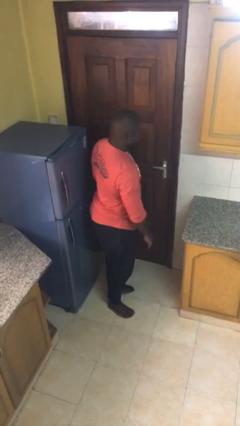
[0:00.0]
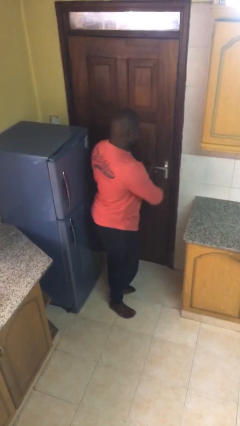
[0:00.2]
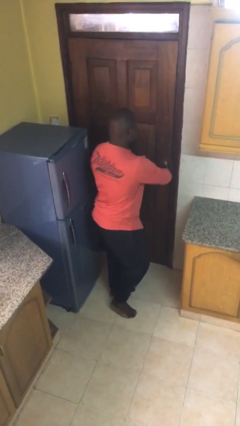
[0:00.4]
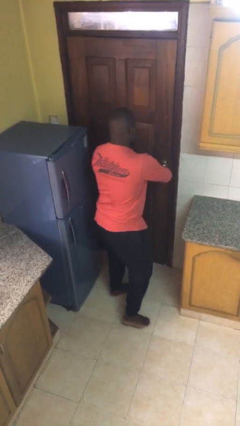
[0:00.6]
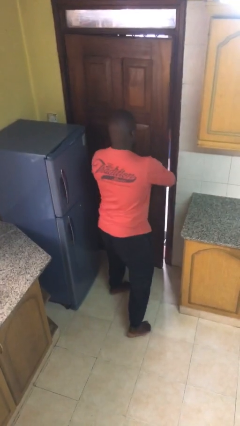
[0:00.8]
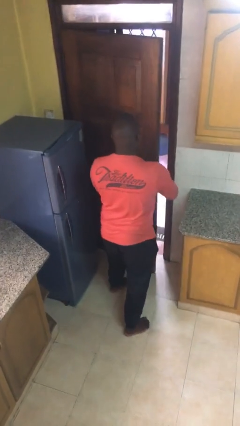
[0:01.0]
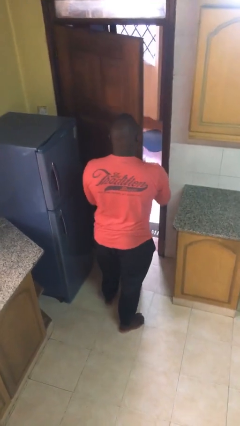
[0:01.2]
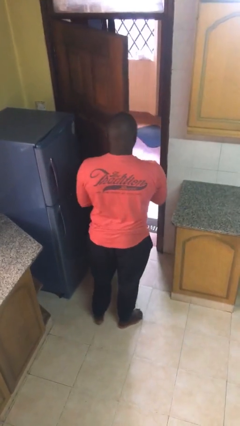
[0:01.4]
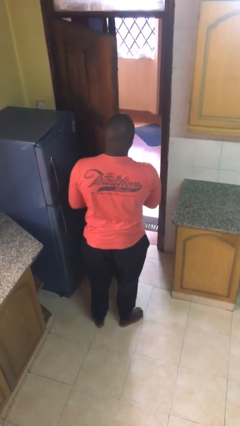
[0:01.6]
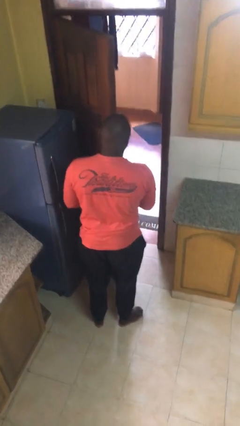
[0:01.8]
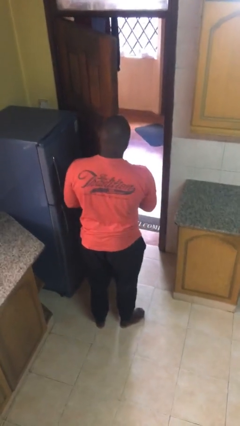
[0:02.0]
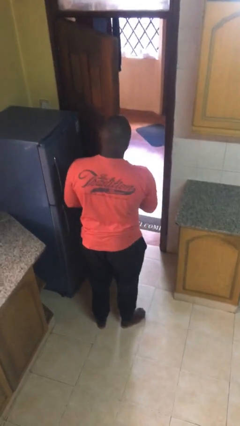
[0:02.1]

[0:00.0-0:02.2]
person opens facility door

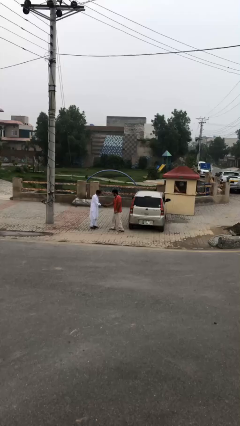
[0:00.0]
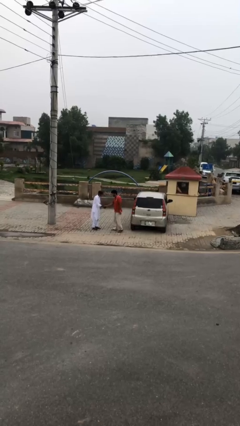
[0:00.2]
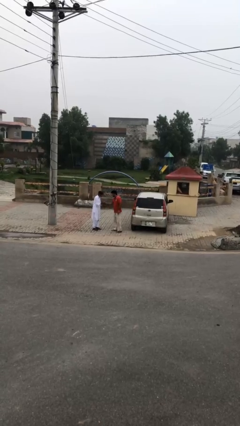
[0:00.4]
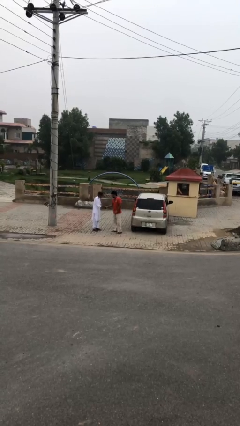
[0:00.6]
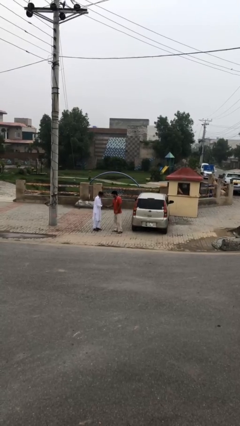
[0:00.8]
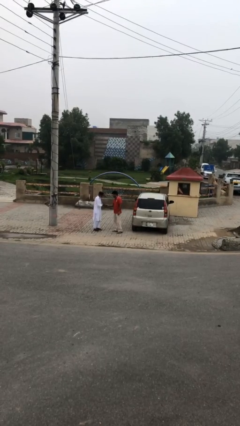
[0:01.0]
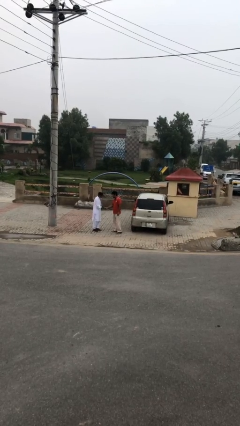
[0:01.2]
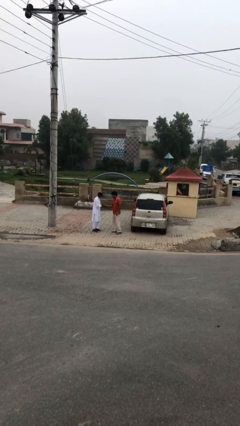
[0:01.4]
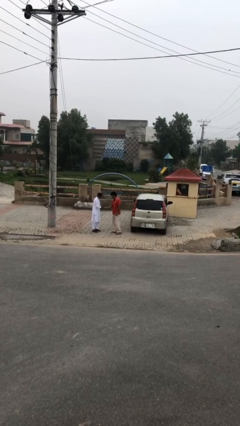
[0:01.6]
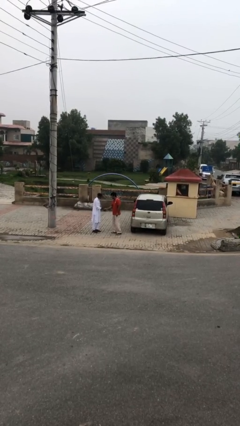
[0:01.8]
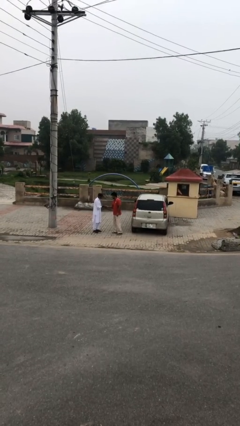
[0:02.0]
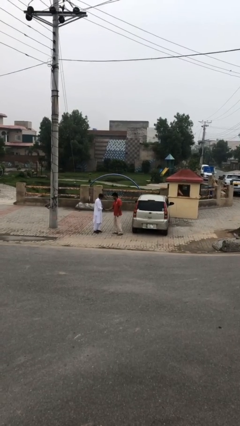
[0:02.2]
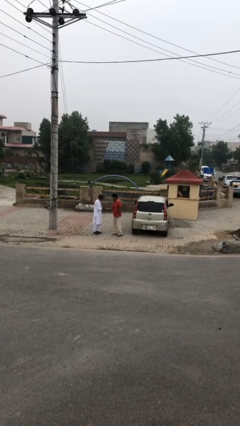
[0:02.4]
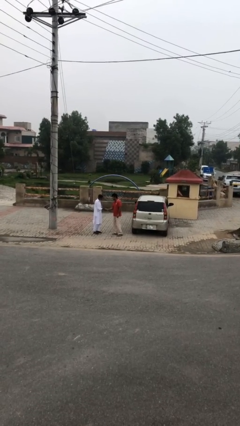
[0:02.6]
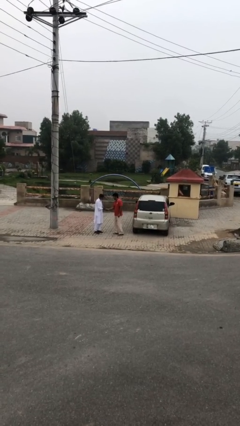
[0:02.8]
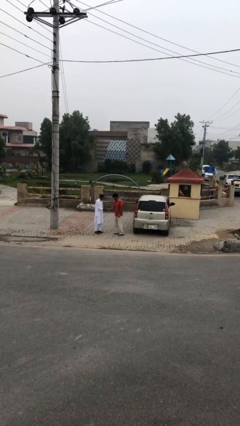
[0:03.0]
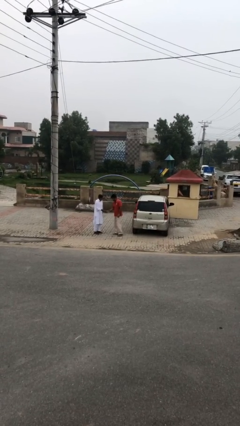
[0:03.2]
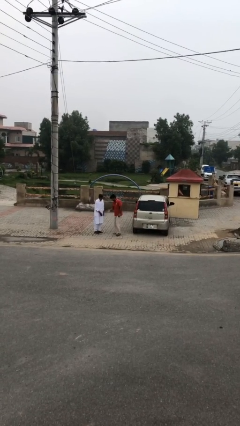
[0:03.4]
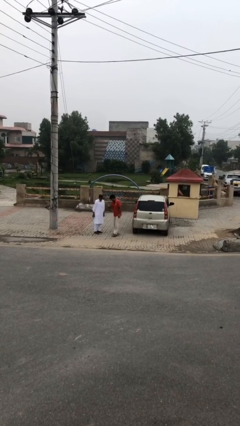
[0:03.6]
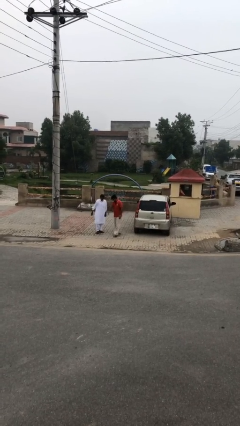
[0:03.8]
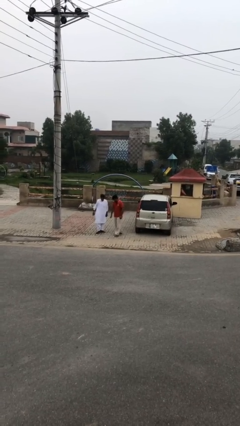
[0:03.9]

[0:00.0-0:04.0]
person shakes hand

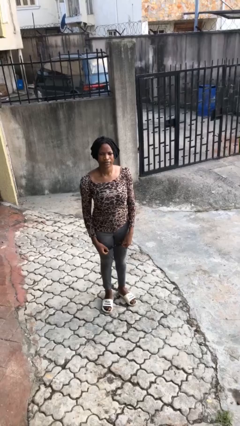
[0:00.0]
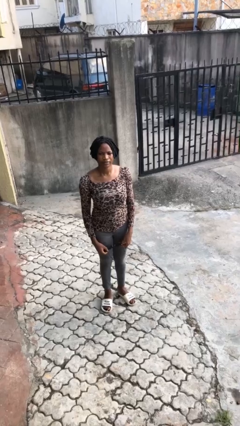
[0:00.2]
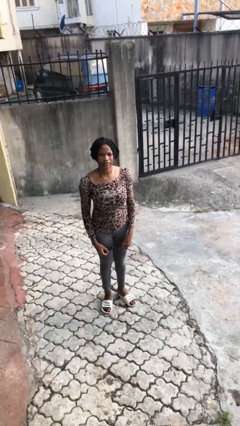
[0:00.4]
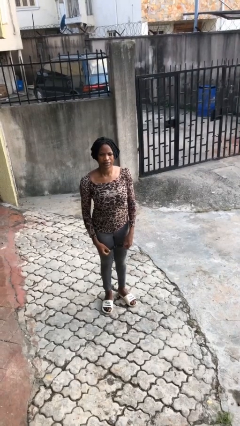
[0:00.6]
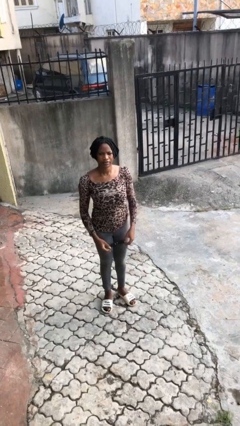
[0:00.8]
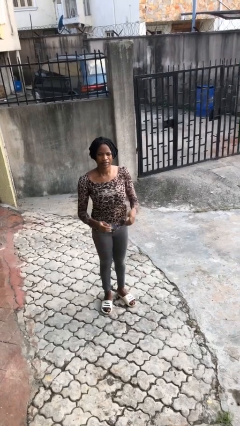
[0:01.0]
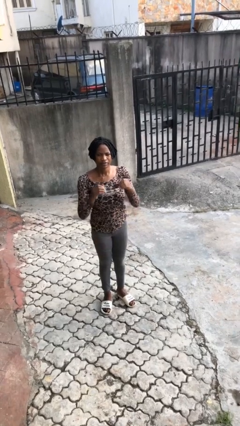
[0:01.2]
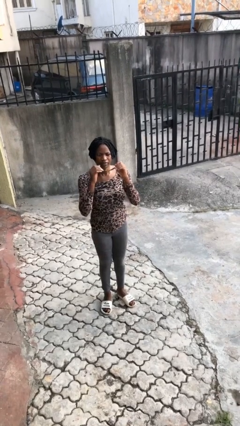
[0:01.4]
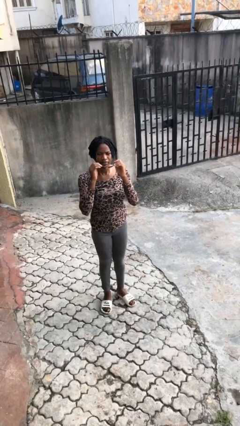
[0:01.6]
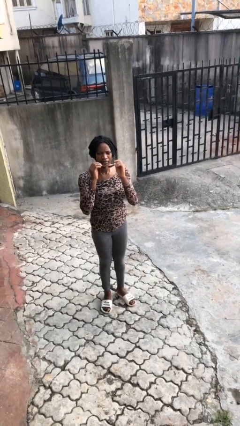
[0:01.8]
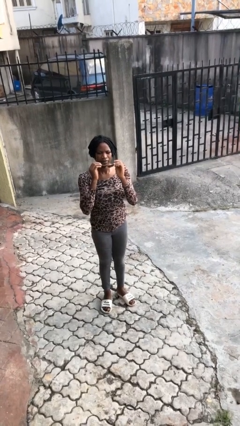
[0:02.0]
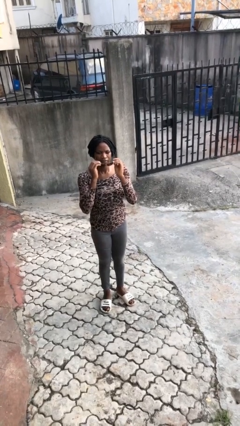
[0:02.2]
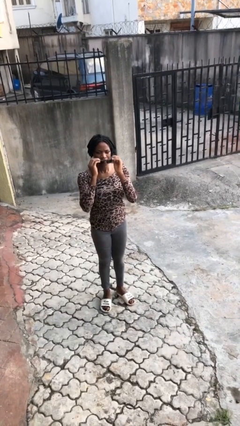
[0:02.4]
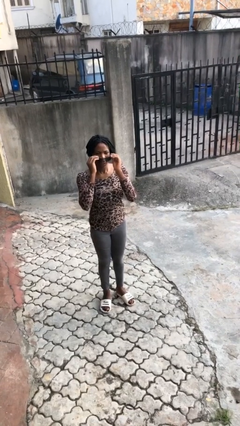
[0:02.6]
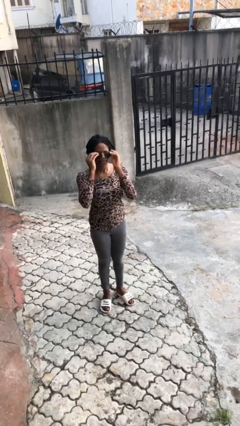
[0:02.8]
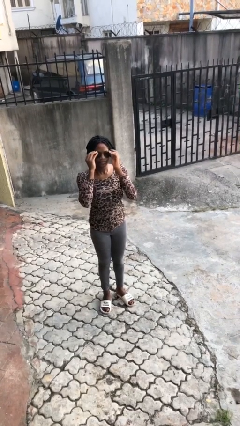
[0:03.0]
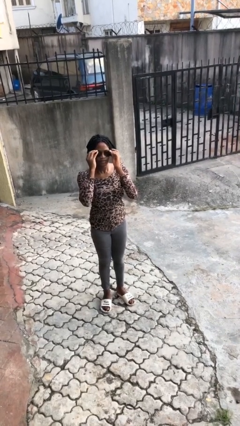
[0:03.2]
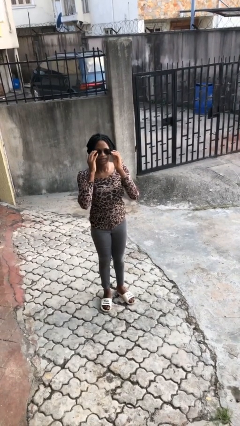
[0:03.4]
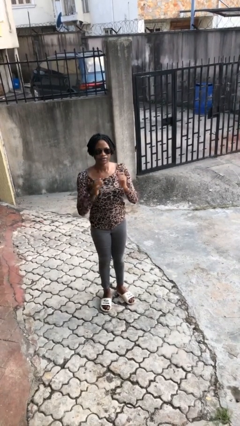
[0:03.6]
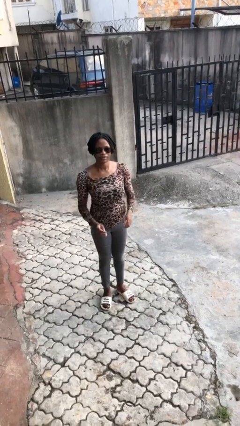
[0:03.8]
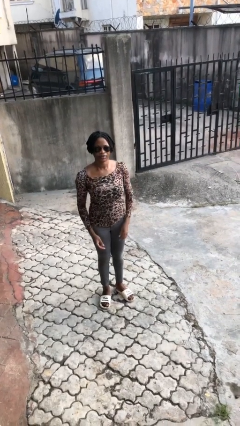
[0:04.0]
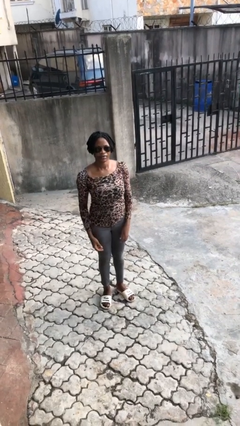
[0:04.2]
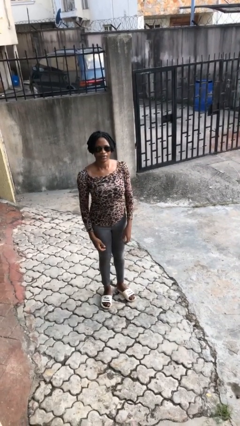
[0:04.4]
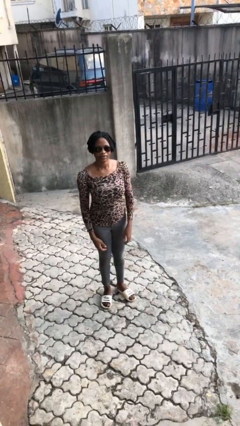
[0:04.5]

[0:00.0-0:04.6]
person puts on sunglasses

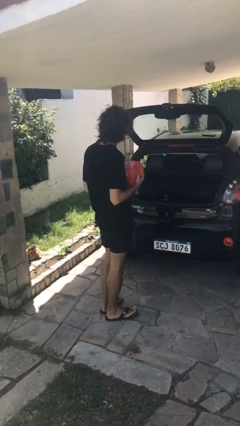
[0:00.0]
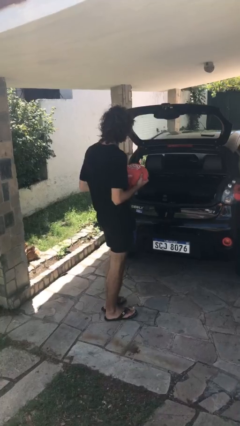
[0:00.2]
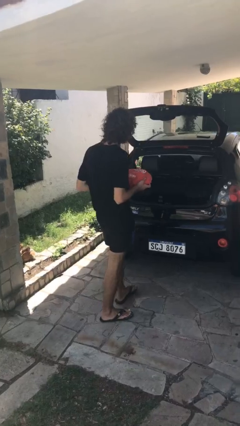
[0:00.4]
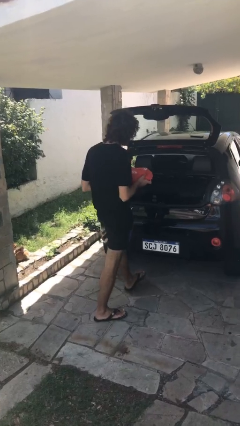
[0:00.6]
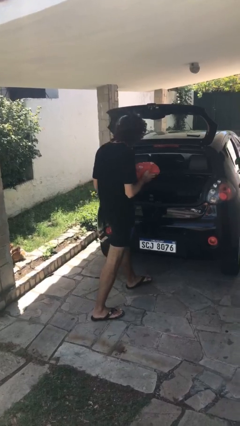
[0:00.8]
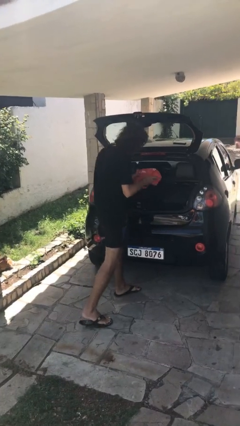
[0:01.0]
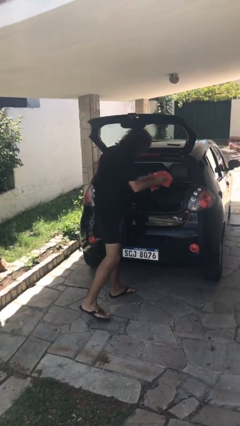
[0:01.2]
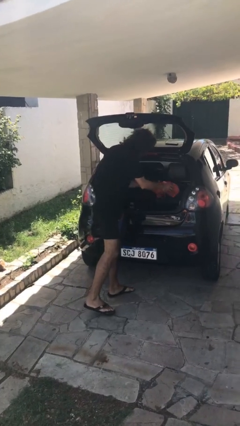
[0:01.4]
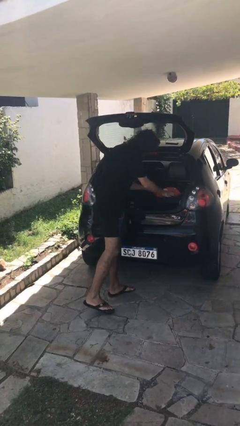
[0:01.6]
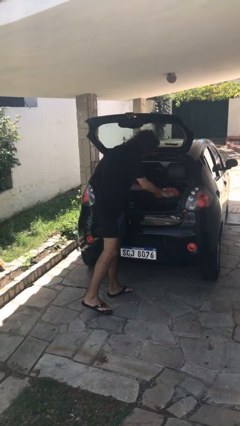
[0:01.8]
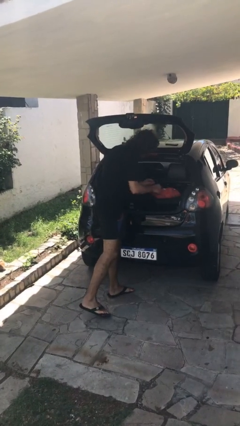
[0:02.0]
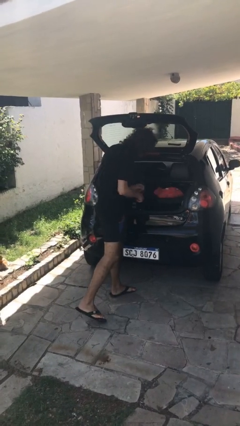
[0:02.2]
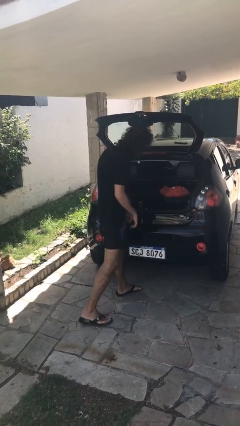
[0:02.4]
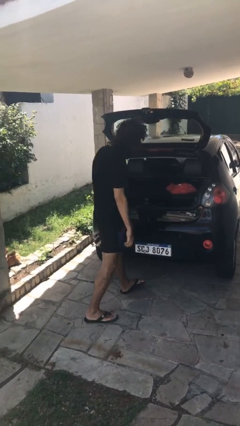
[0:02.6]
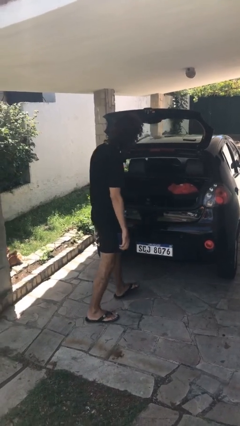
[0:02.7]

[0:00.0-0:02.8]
person loads car

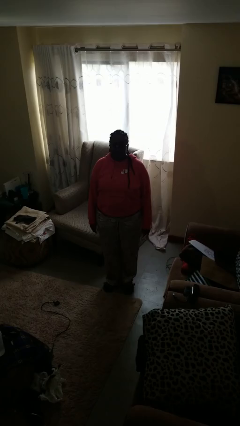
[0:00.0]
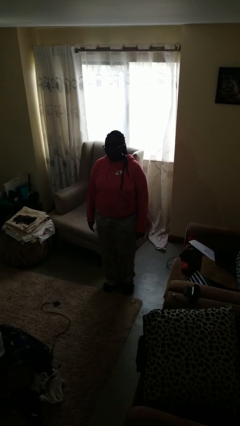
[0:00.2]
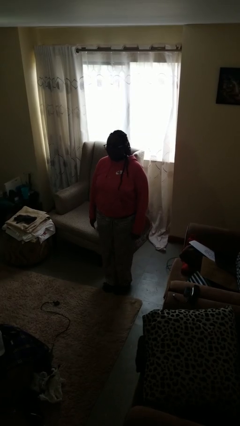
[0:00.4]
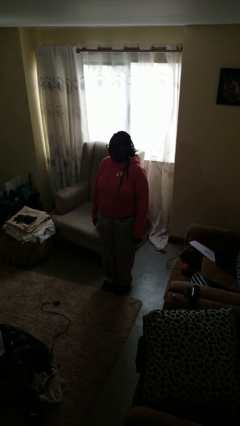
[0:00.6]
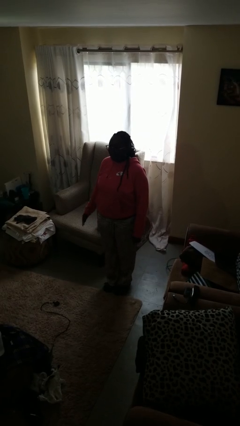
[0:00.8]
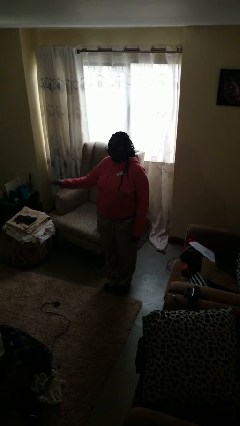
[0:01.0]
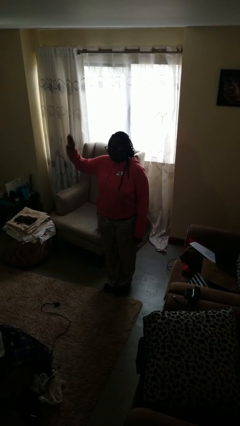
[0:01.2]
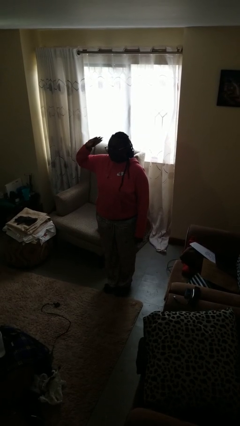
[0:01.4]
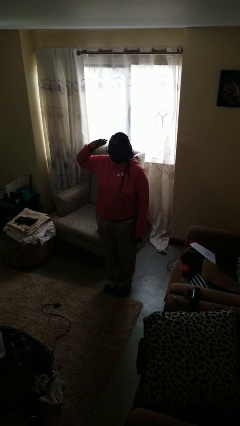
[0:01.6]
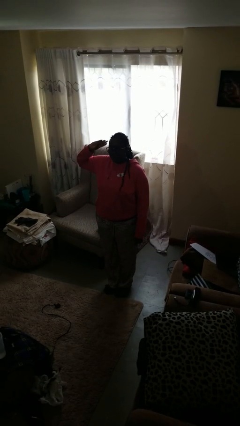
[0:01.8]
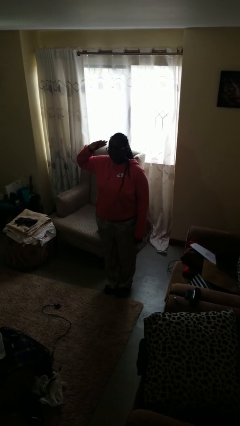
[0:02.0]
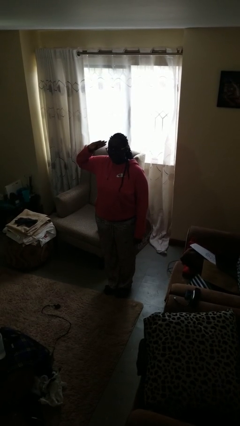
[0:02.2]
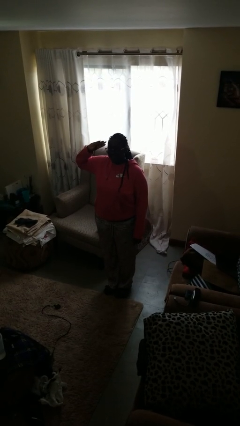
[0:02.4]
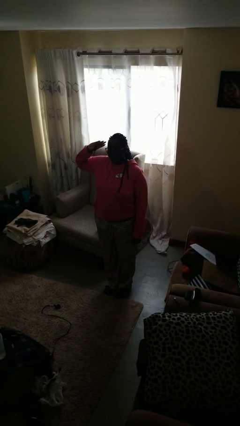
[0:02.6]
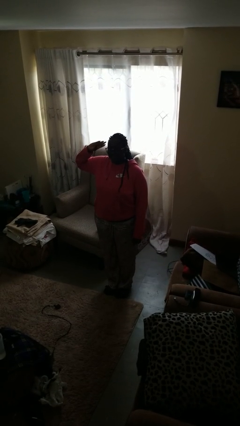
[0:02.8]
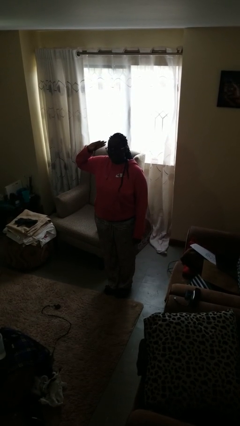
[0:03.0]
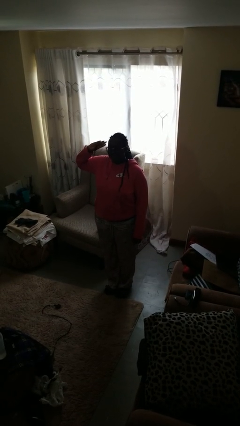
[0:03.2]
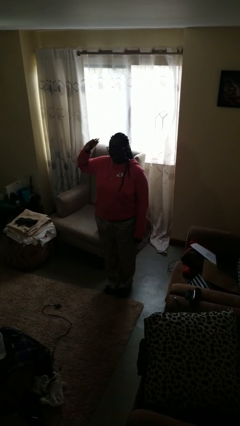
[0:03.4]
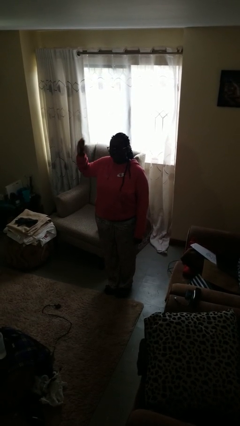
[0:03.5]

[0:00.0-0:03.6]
person salutes

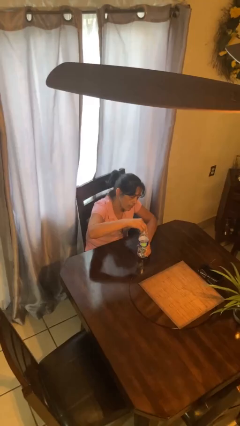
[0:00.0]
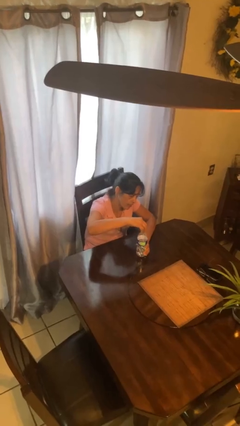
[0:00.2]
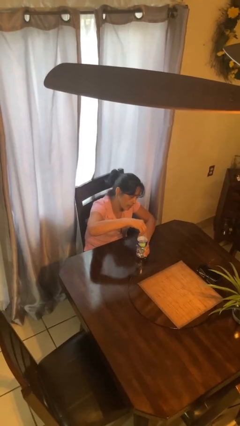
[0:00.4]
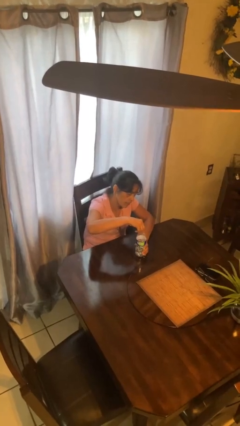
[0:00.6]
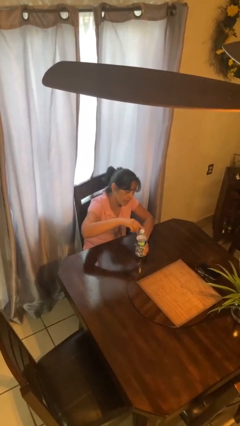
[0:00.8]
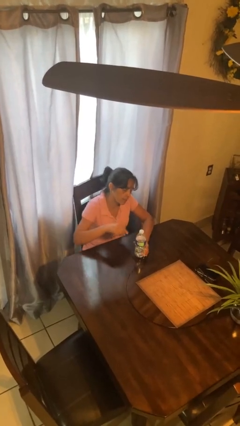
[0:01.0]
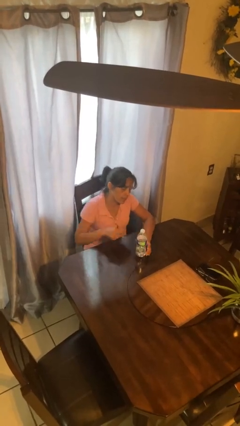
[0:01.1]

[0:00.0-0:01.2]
person screws lid to bottle
